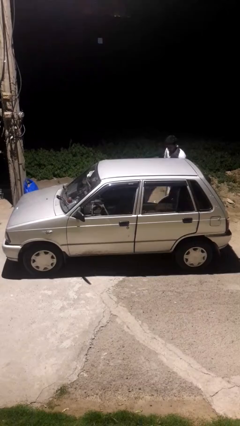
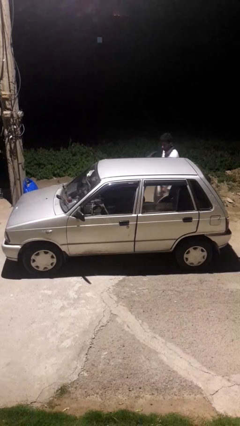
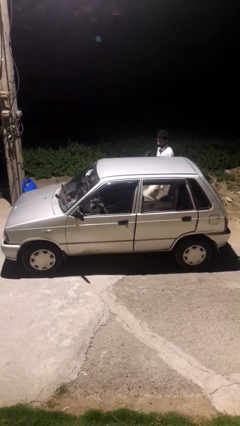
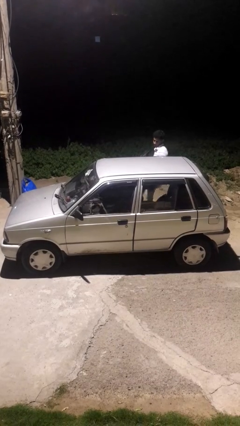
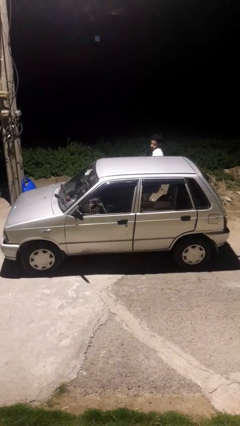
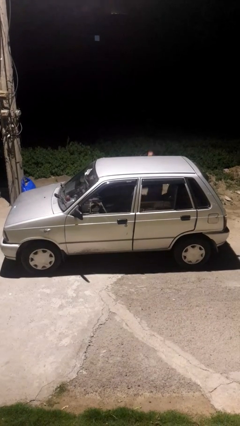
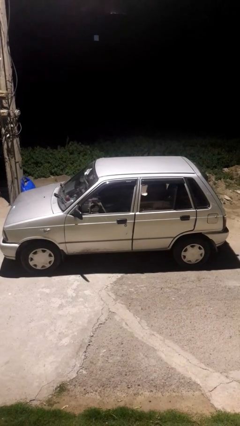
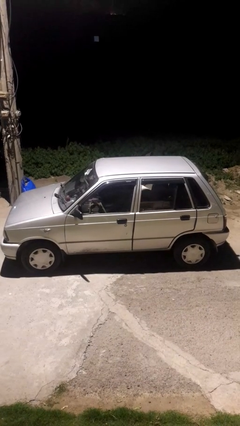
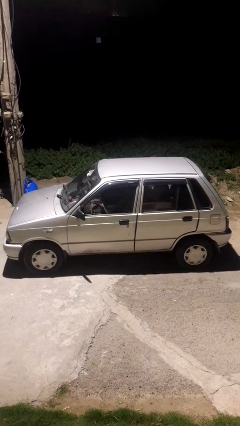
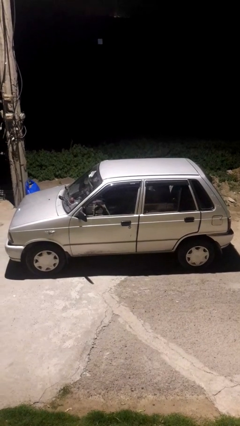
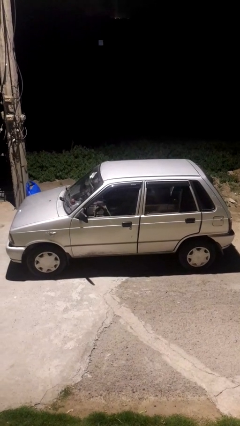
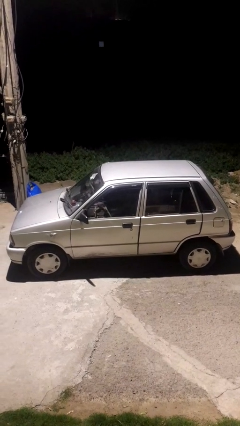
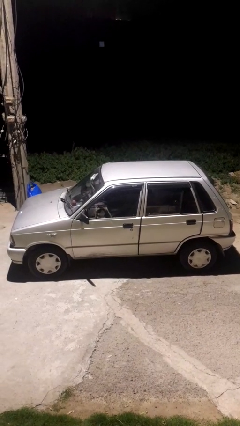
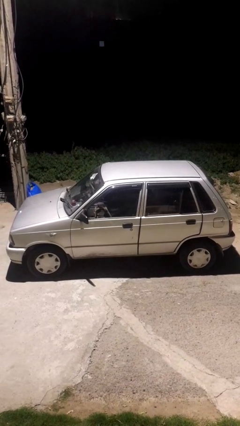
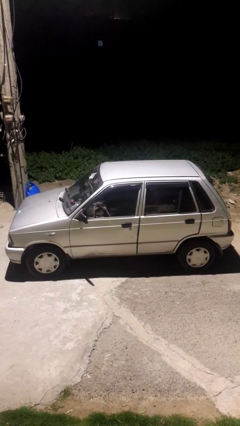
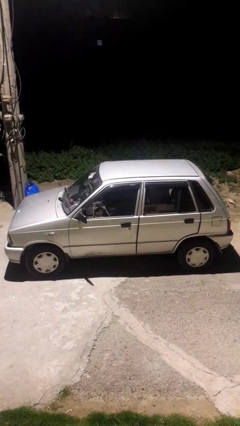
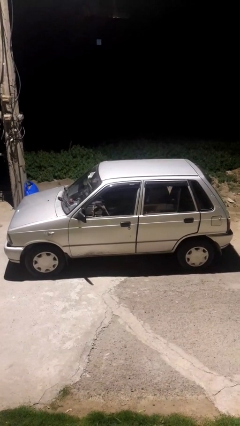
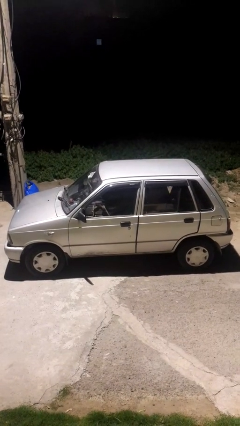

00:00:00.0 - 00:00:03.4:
car picks up person

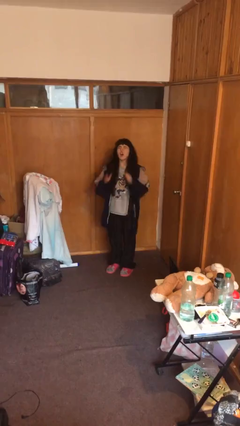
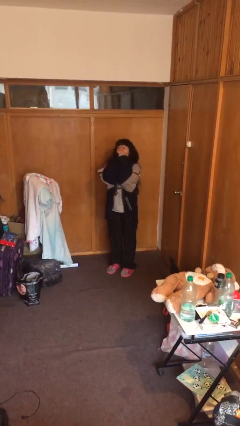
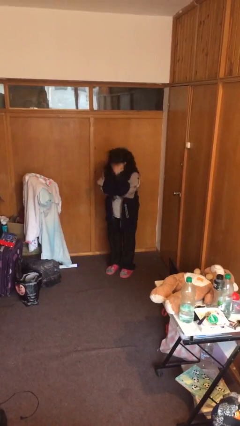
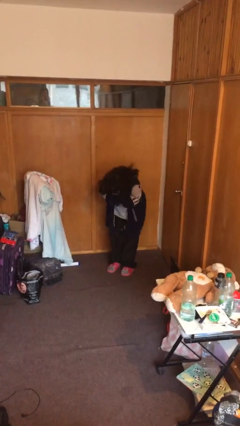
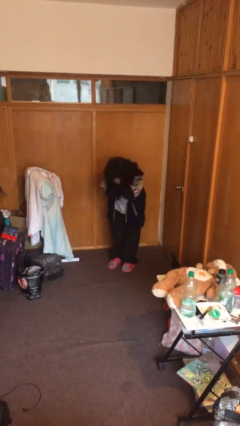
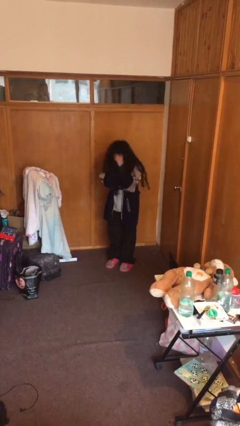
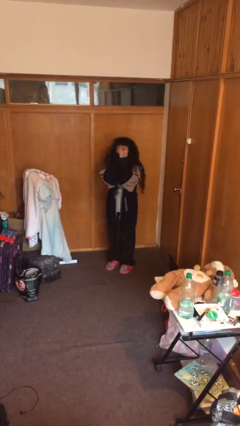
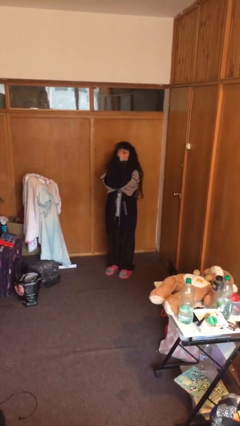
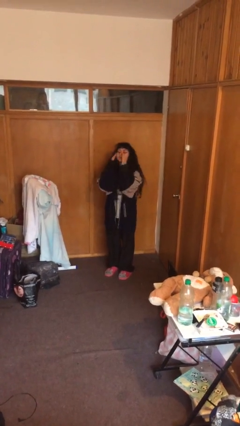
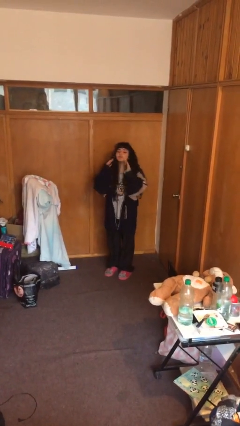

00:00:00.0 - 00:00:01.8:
person sneezes into hand

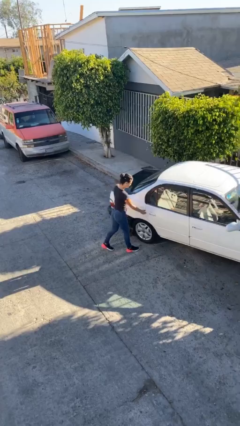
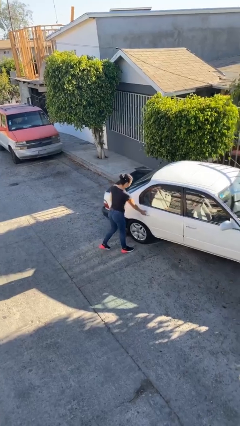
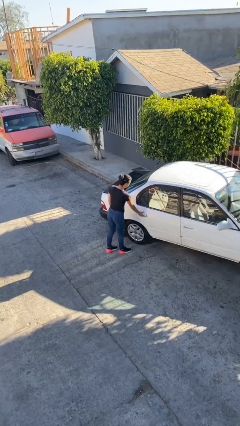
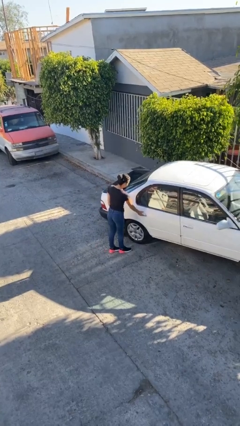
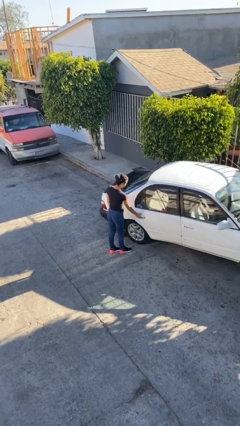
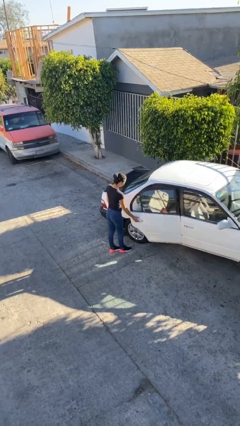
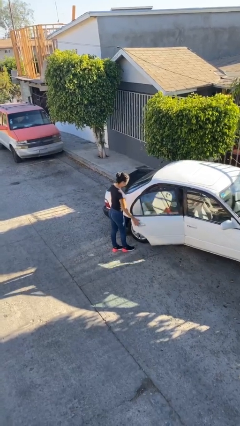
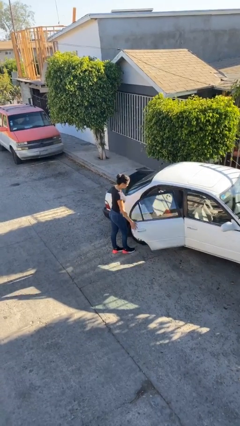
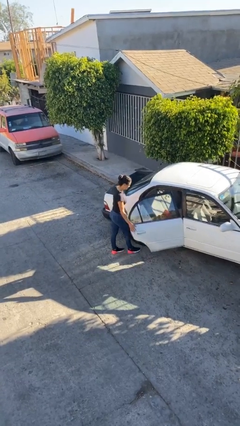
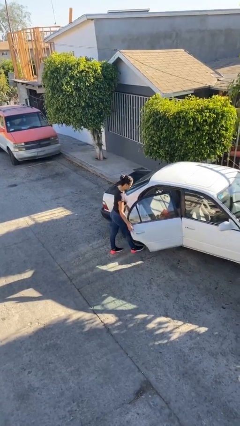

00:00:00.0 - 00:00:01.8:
person opens car door

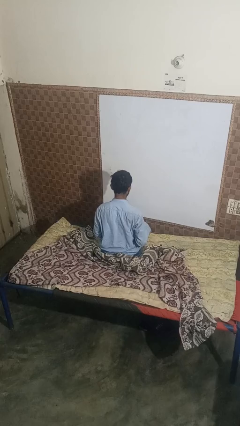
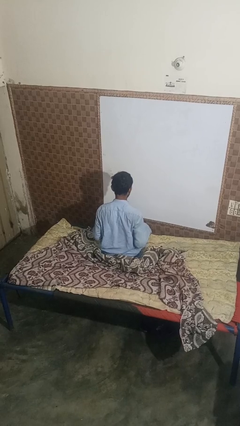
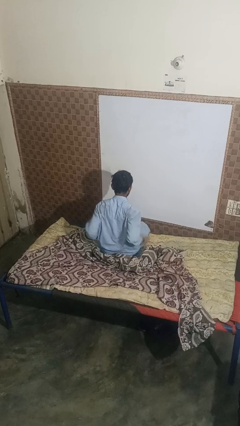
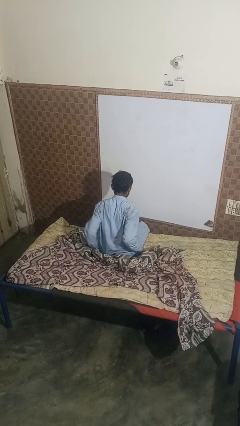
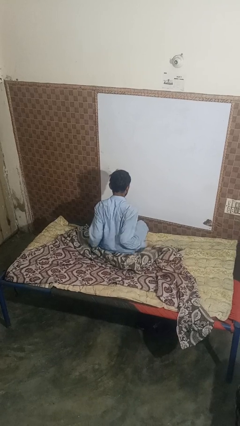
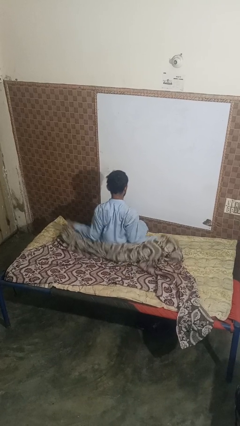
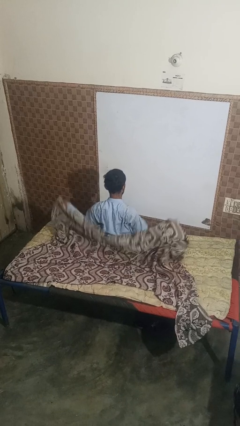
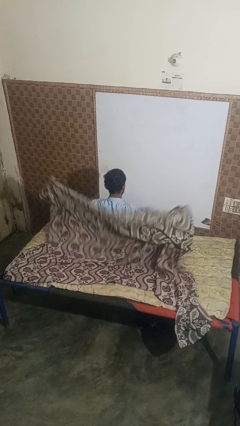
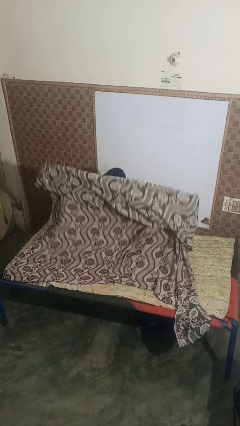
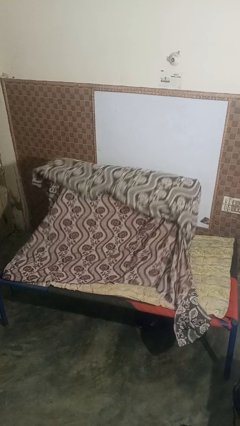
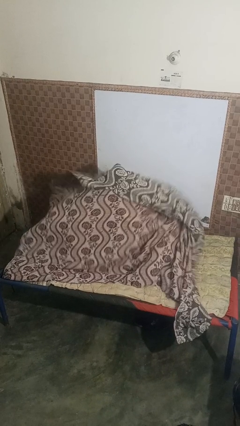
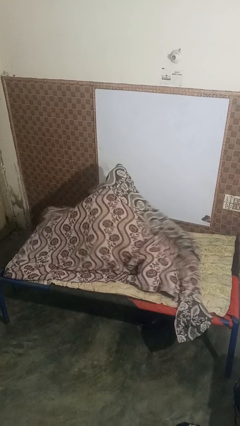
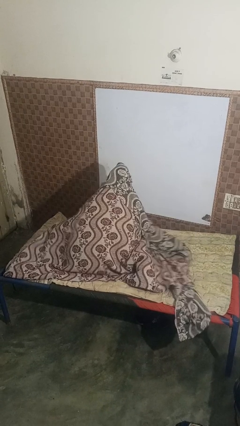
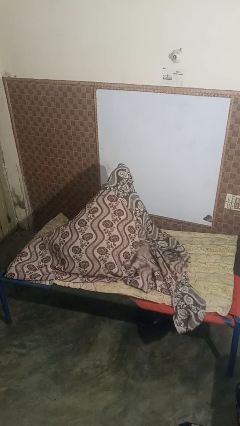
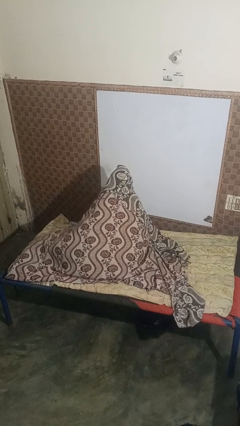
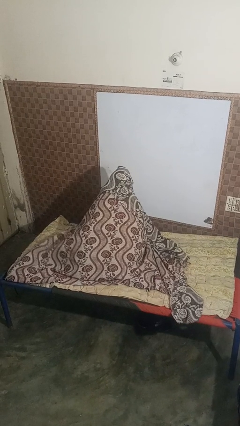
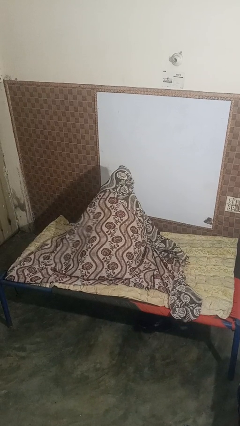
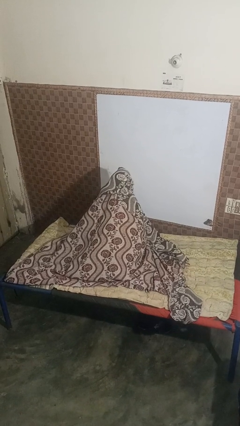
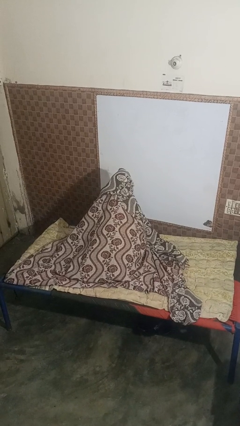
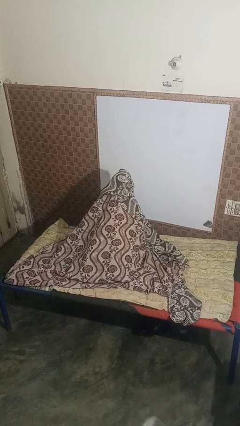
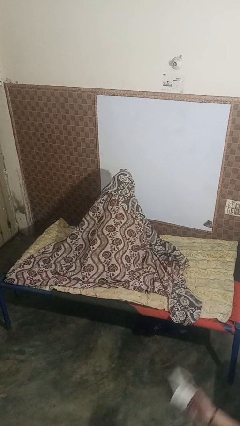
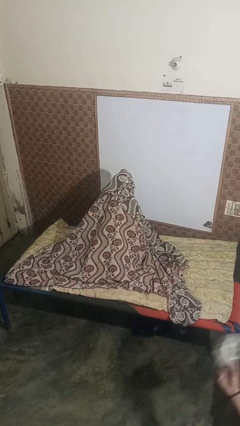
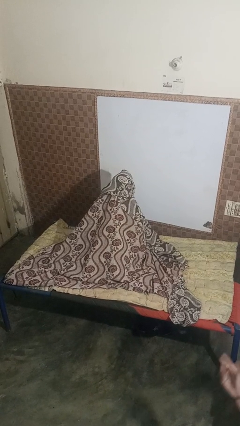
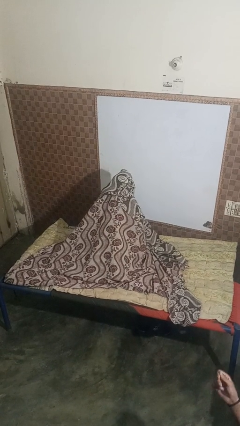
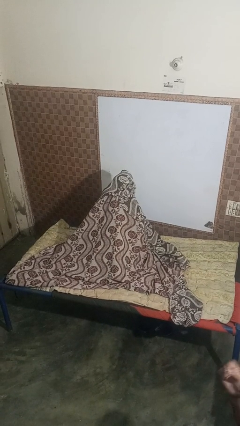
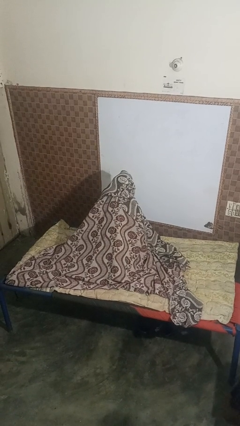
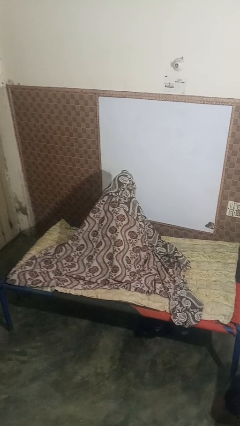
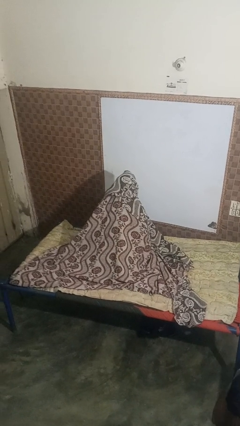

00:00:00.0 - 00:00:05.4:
person covers with blanket

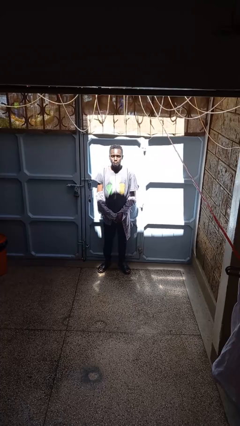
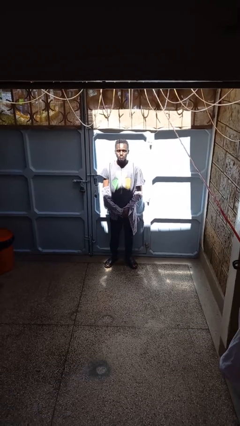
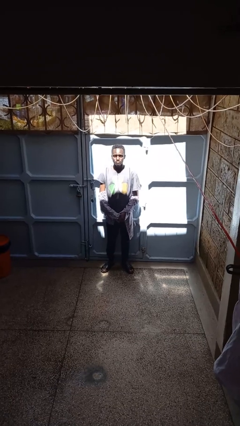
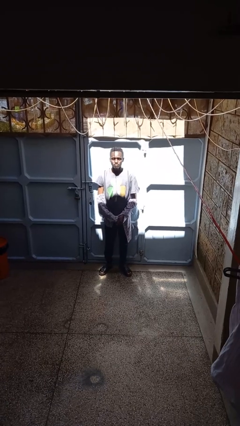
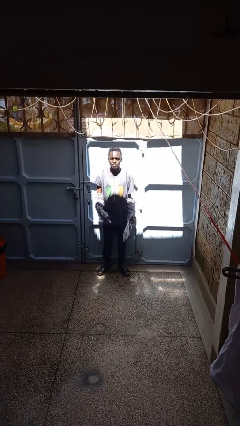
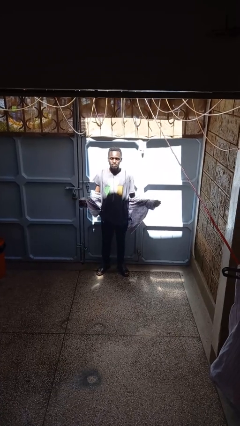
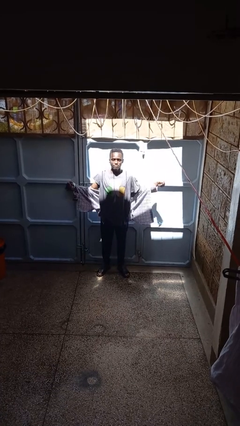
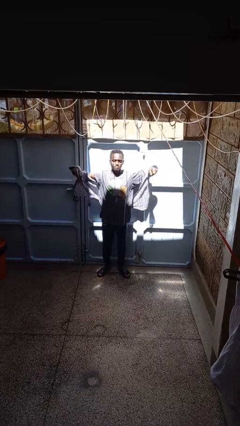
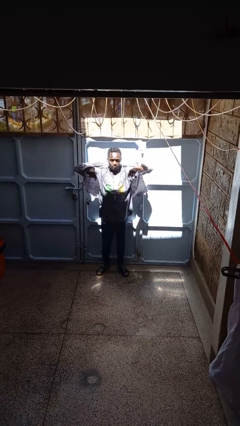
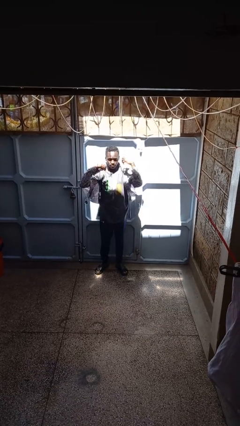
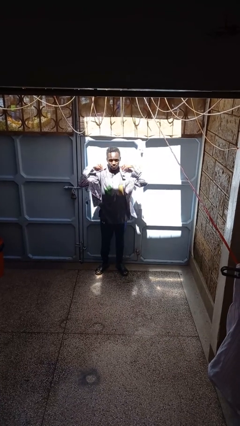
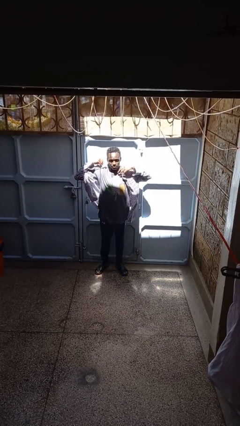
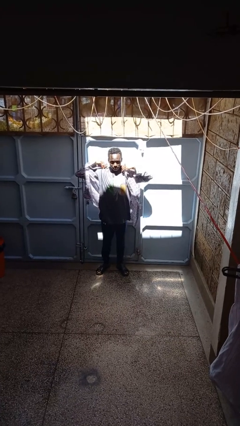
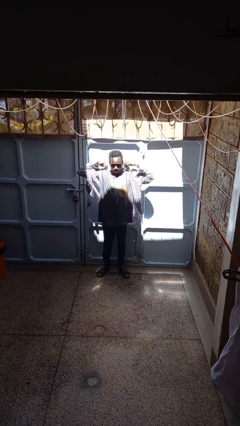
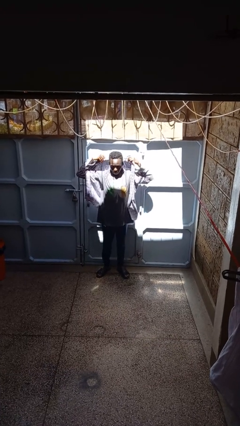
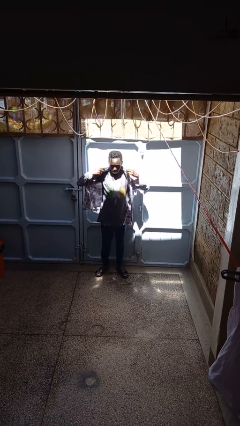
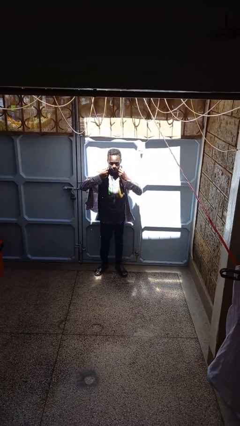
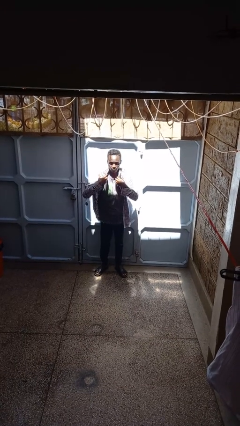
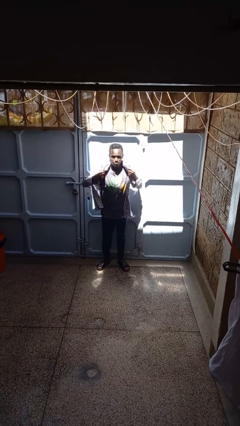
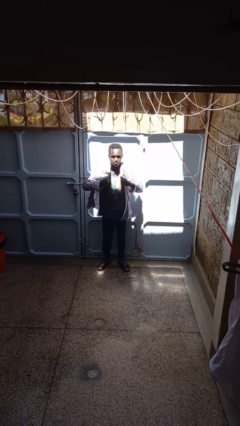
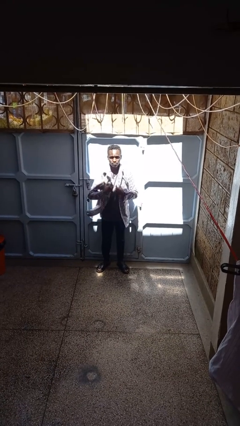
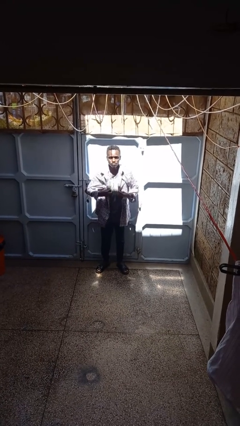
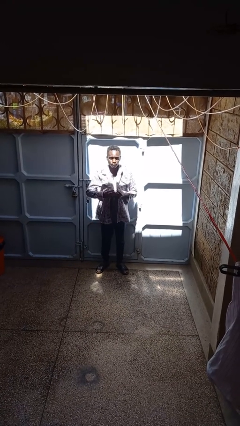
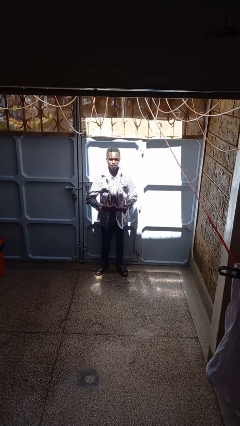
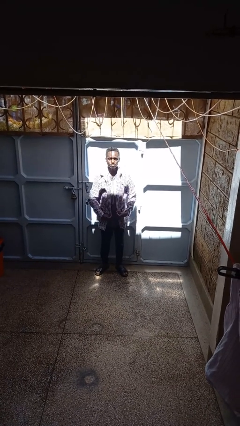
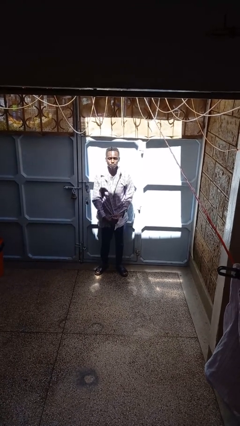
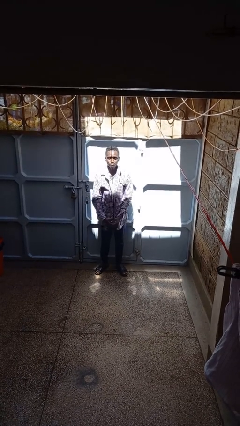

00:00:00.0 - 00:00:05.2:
person puts on shirt
